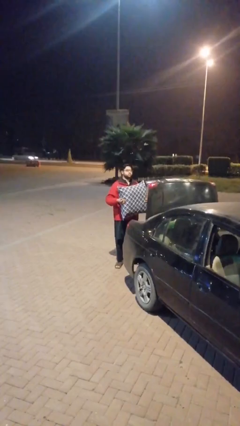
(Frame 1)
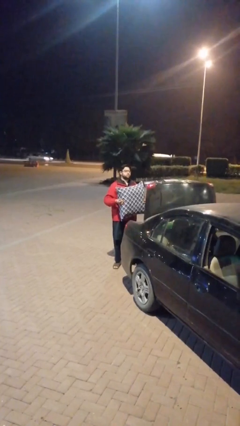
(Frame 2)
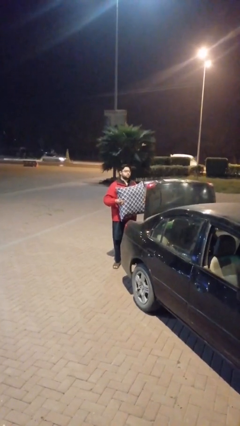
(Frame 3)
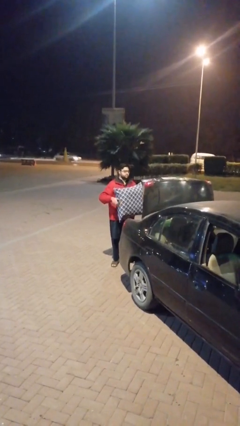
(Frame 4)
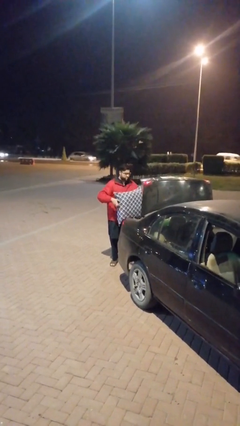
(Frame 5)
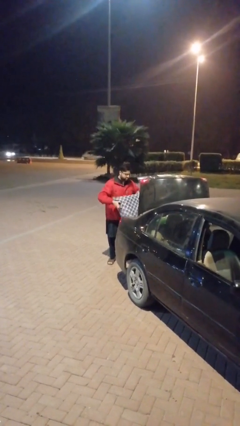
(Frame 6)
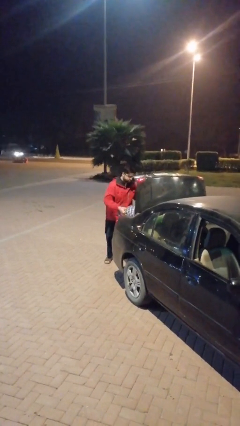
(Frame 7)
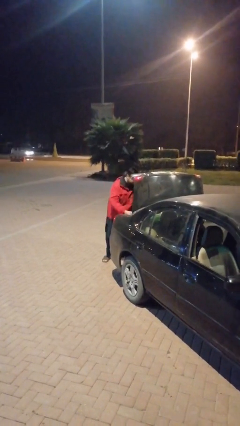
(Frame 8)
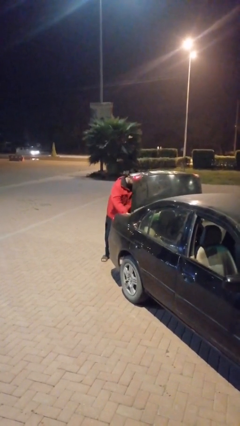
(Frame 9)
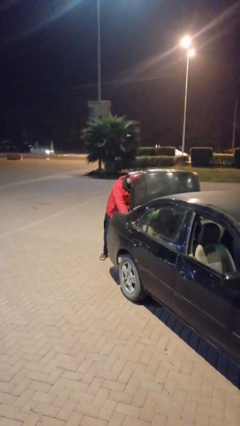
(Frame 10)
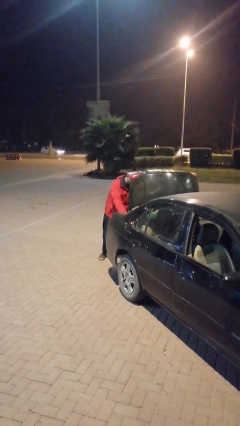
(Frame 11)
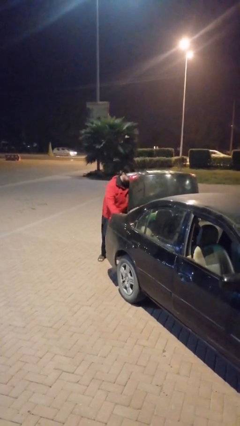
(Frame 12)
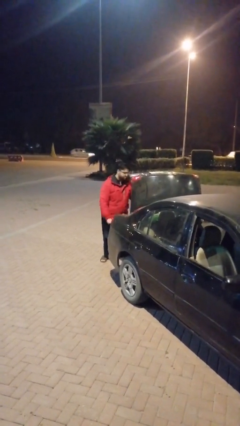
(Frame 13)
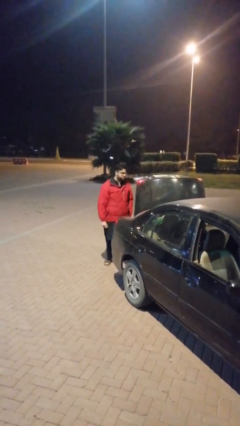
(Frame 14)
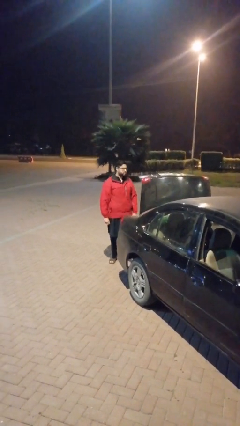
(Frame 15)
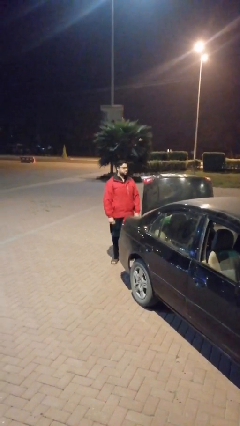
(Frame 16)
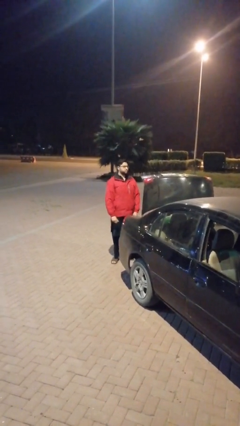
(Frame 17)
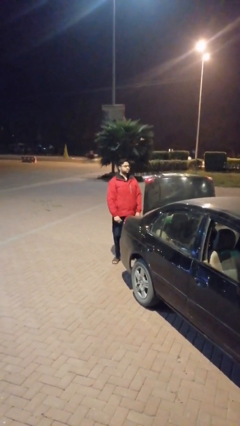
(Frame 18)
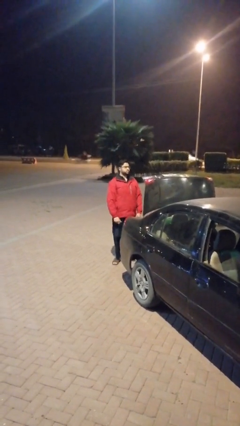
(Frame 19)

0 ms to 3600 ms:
person loads car

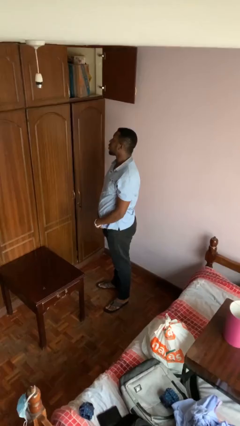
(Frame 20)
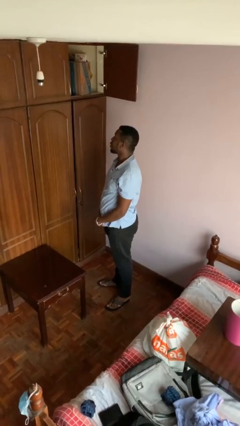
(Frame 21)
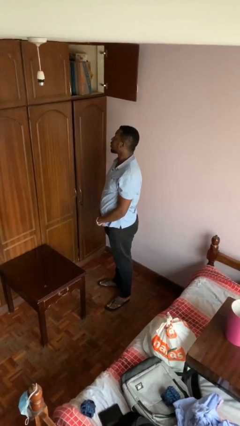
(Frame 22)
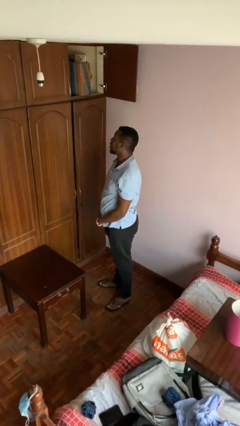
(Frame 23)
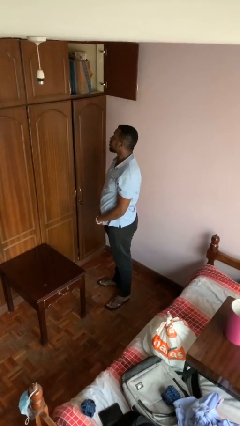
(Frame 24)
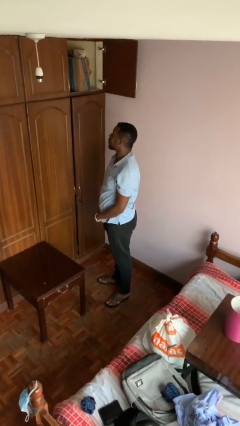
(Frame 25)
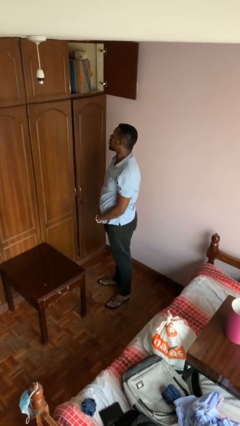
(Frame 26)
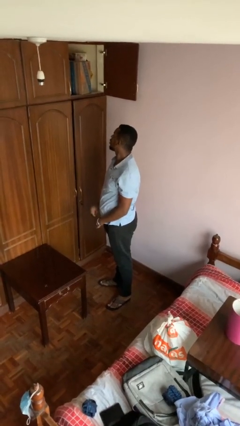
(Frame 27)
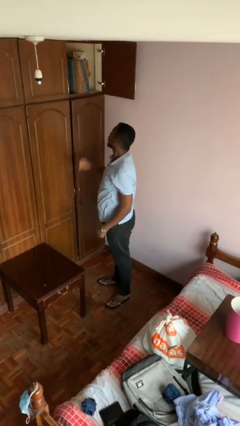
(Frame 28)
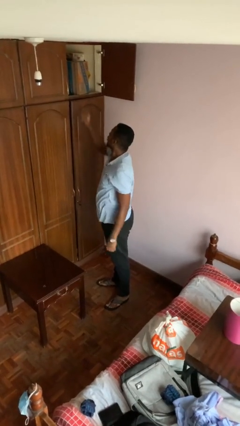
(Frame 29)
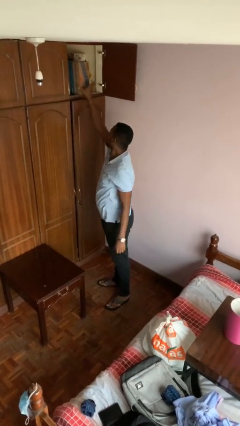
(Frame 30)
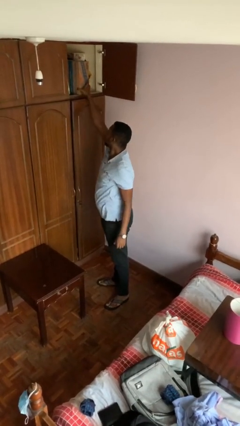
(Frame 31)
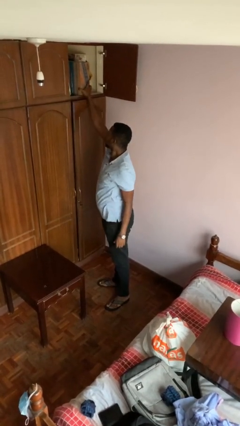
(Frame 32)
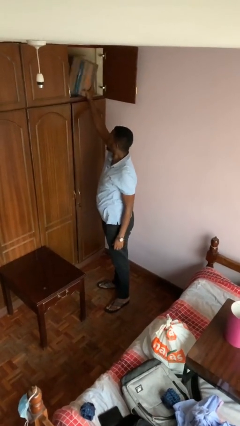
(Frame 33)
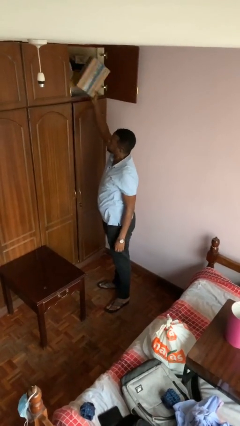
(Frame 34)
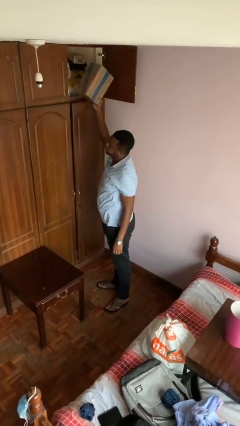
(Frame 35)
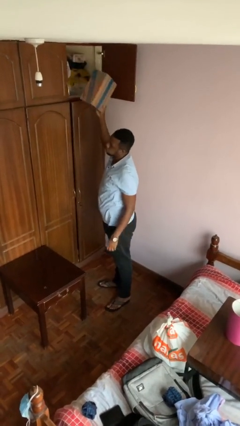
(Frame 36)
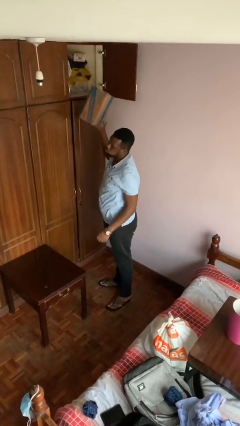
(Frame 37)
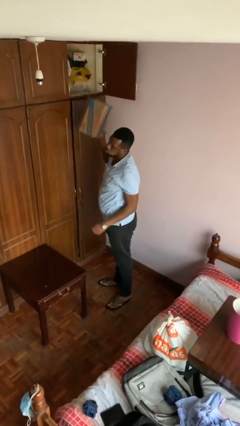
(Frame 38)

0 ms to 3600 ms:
person picks up object from shelf

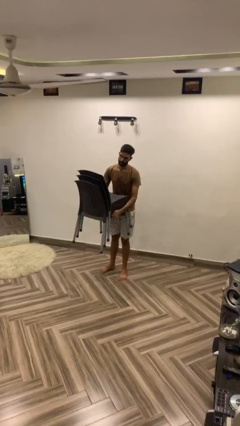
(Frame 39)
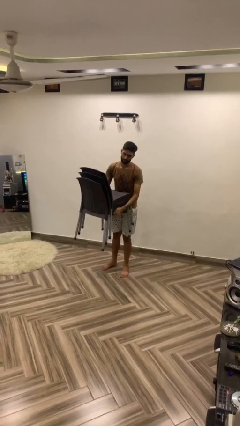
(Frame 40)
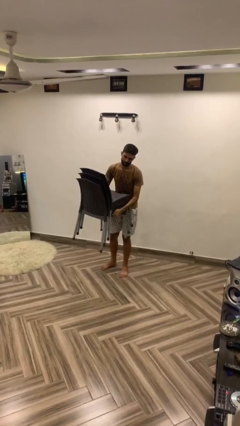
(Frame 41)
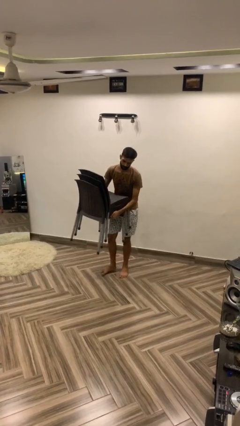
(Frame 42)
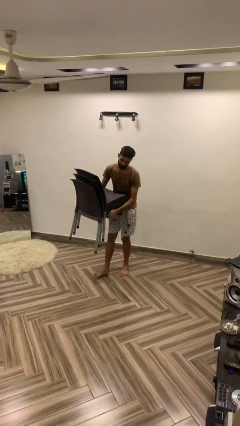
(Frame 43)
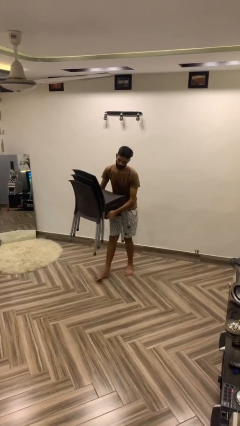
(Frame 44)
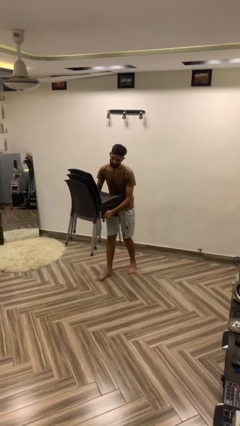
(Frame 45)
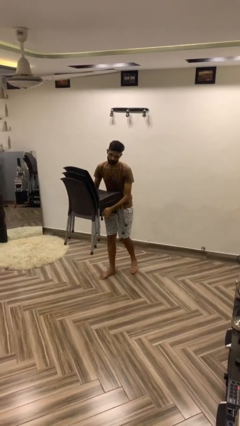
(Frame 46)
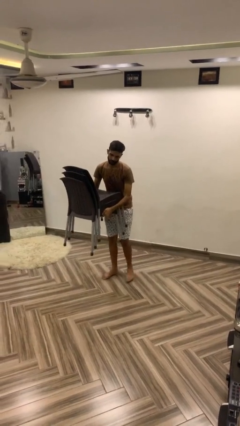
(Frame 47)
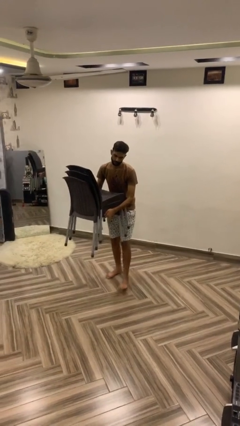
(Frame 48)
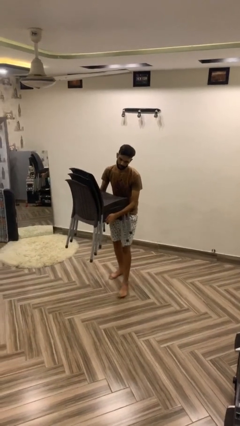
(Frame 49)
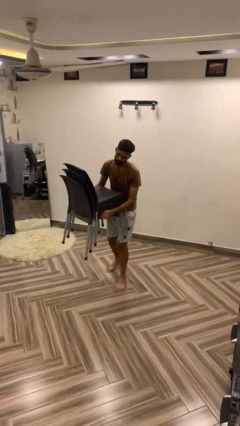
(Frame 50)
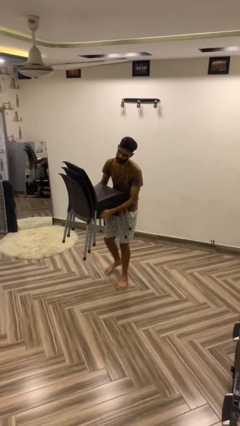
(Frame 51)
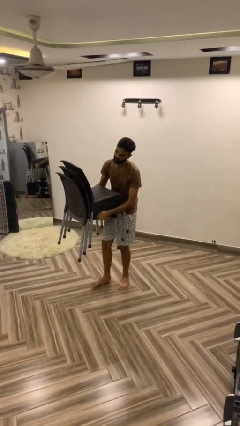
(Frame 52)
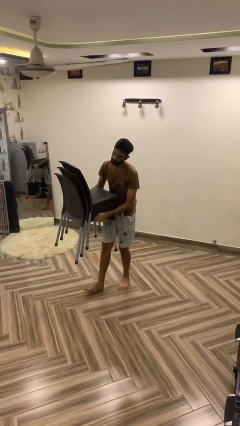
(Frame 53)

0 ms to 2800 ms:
person carries heavy object

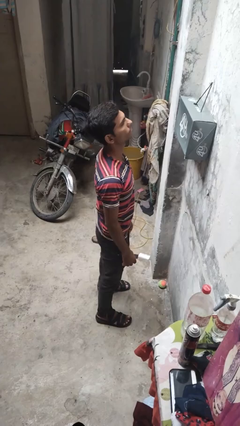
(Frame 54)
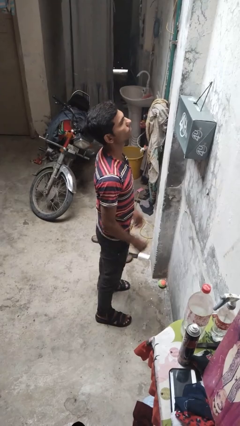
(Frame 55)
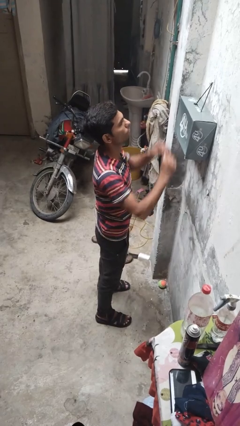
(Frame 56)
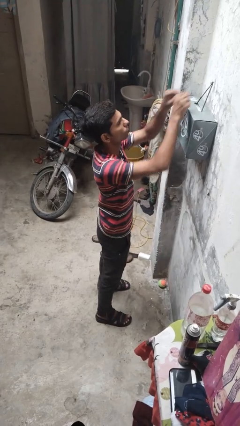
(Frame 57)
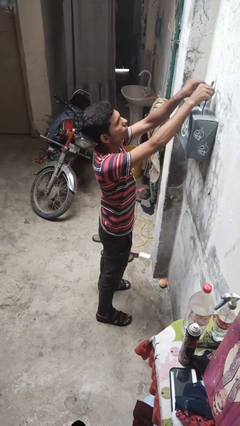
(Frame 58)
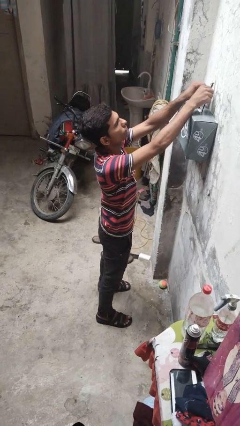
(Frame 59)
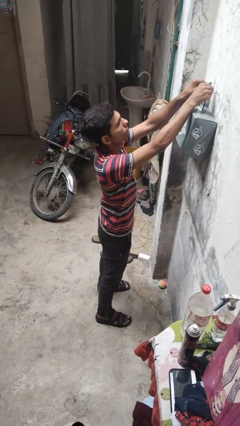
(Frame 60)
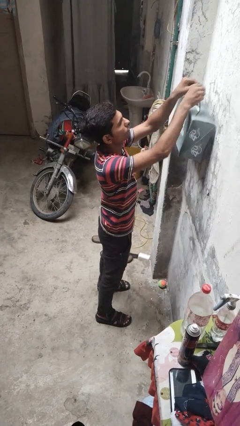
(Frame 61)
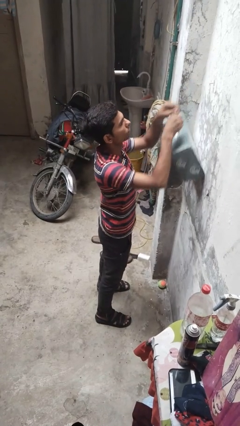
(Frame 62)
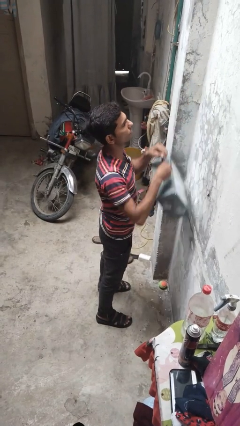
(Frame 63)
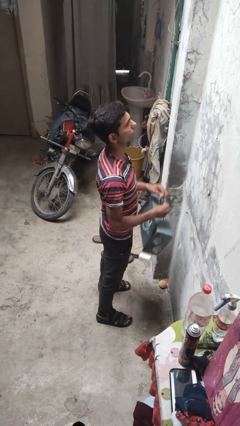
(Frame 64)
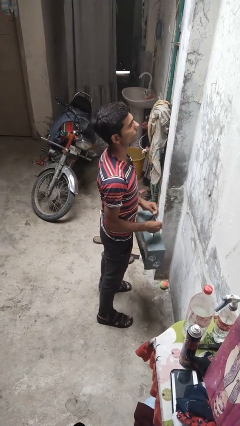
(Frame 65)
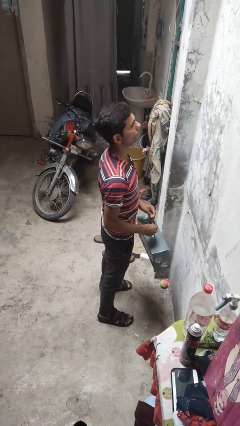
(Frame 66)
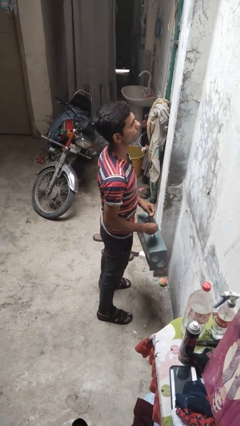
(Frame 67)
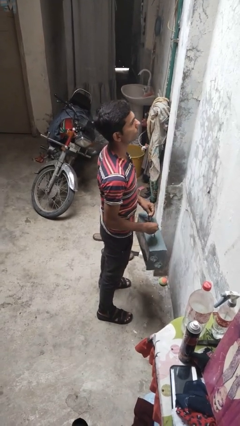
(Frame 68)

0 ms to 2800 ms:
person takes down smoke detector

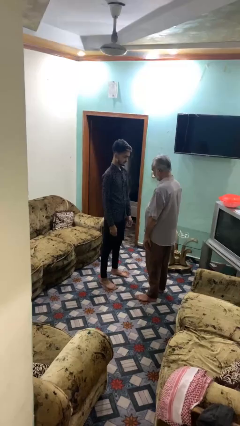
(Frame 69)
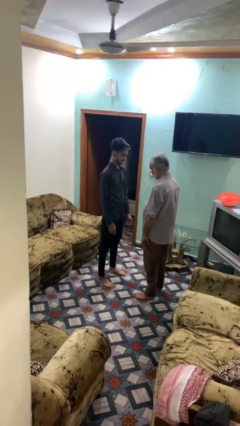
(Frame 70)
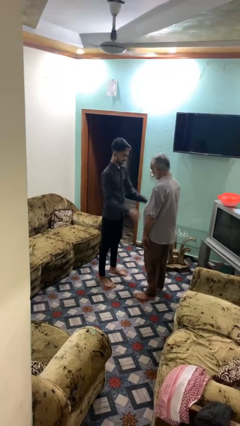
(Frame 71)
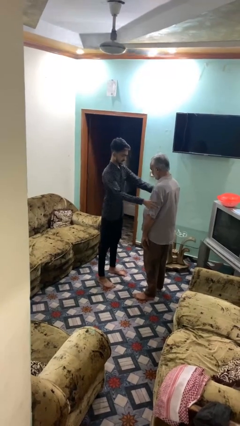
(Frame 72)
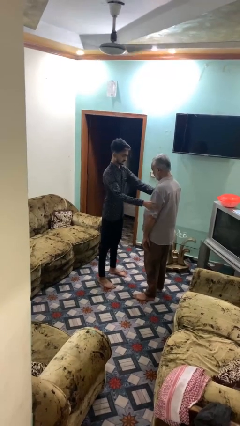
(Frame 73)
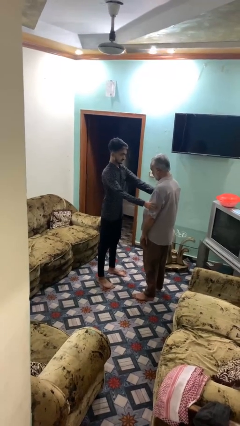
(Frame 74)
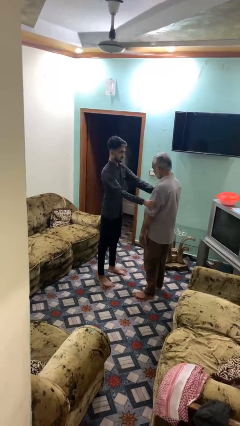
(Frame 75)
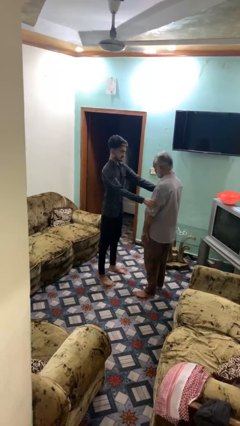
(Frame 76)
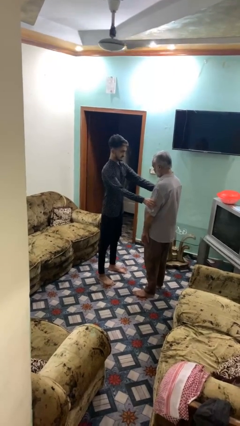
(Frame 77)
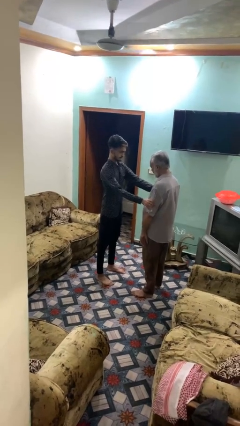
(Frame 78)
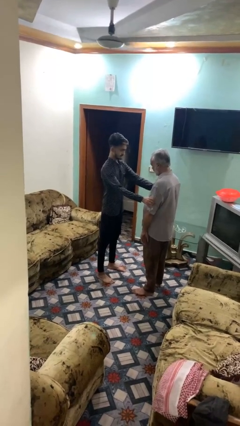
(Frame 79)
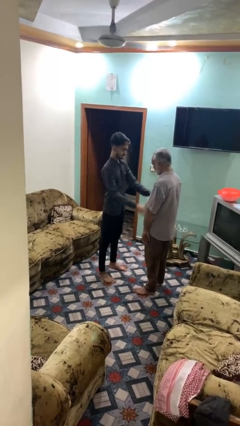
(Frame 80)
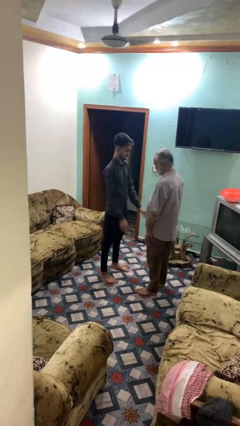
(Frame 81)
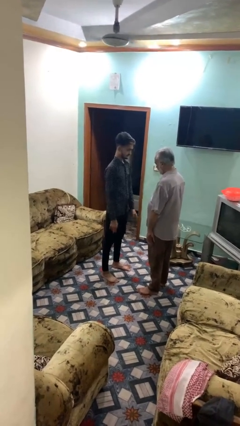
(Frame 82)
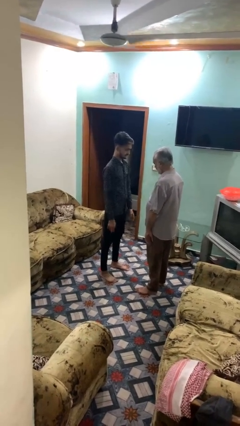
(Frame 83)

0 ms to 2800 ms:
person grabs person by bicep

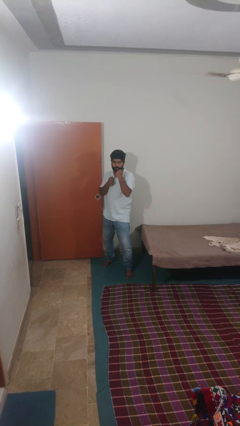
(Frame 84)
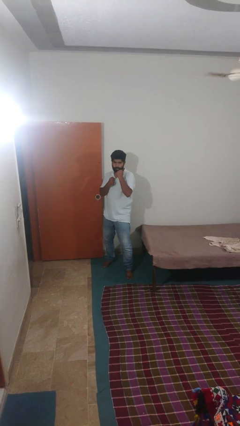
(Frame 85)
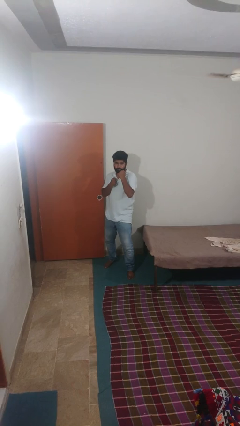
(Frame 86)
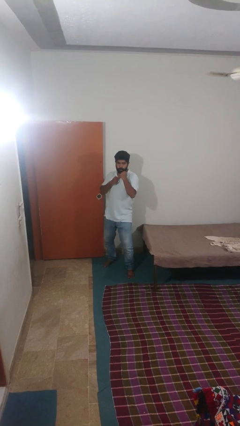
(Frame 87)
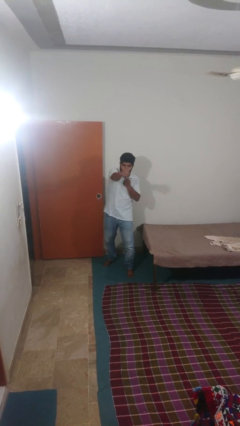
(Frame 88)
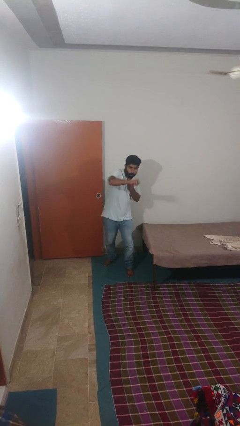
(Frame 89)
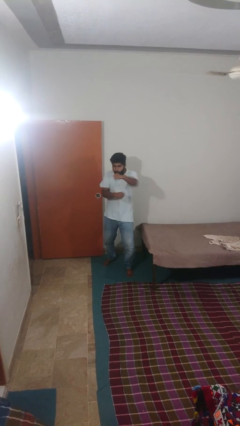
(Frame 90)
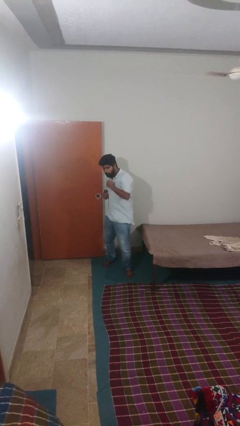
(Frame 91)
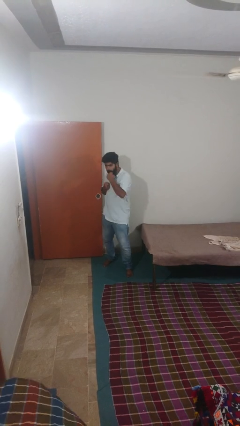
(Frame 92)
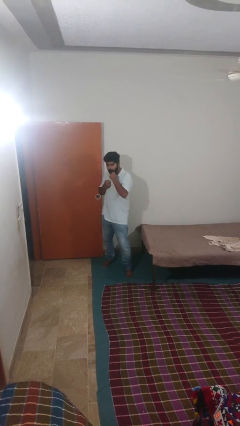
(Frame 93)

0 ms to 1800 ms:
person punches

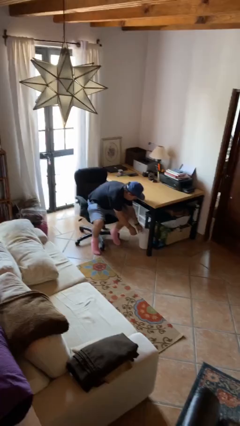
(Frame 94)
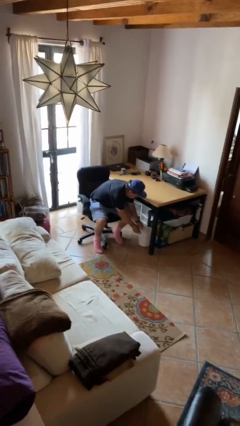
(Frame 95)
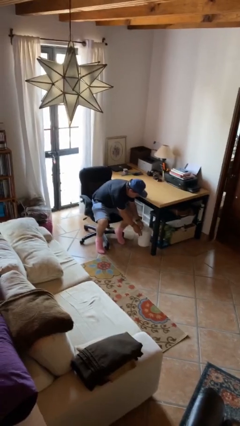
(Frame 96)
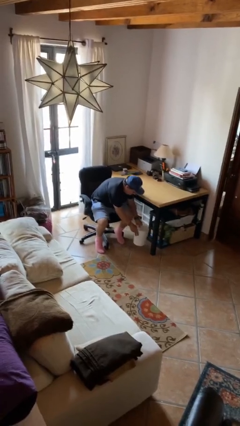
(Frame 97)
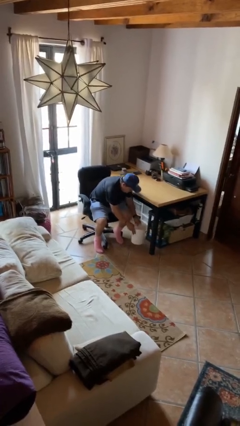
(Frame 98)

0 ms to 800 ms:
person picks up object from floor
